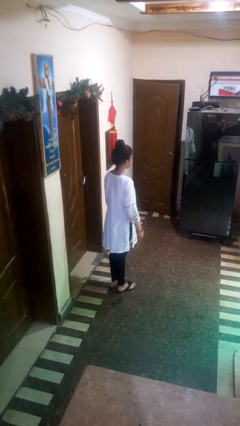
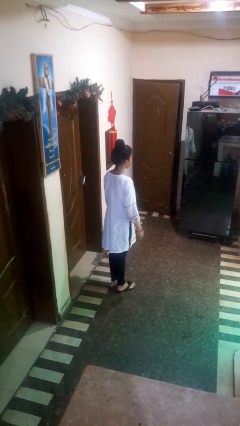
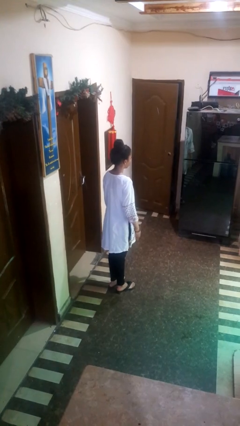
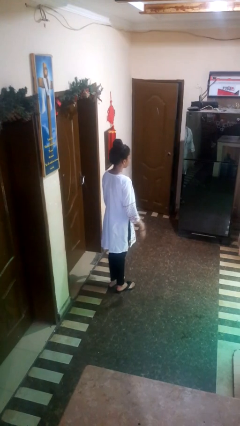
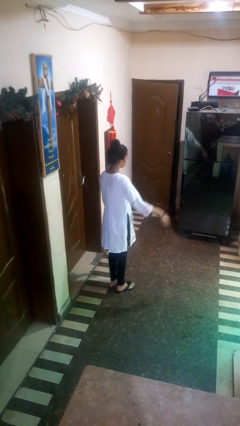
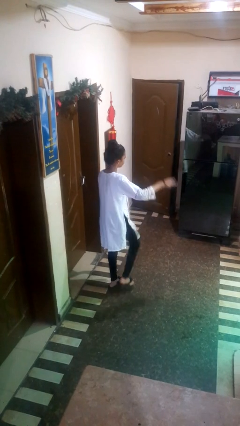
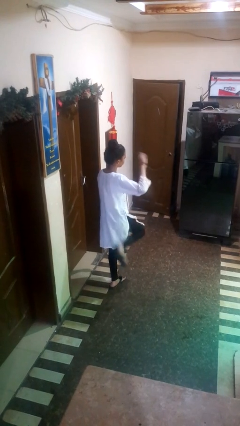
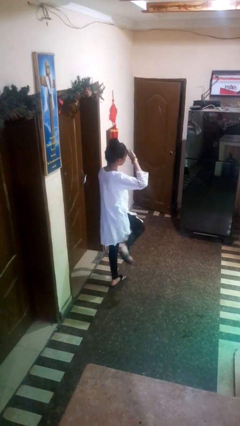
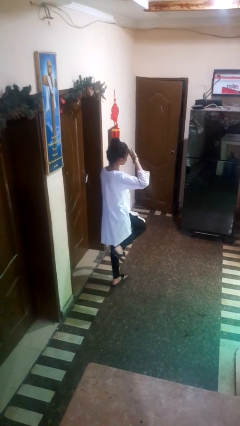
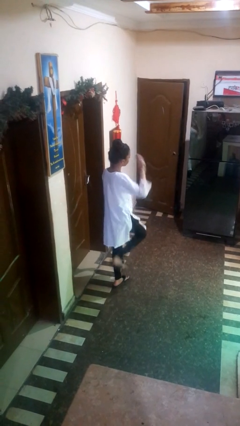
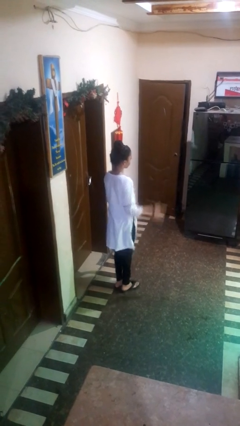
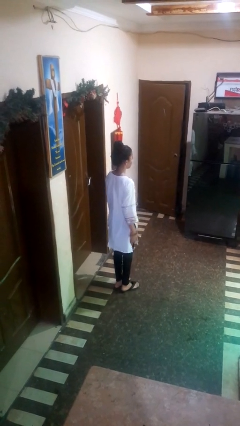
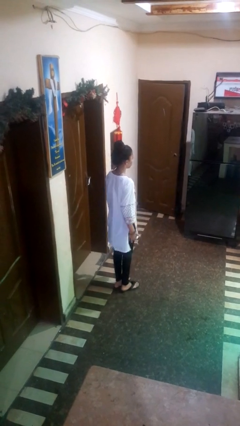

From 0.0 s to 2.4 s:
person salutes

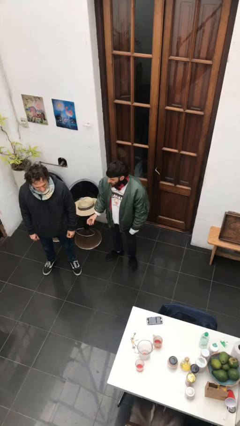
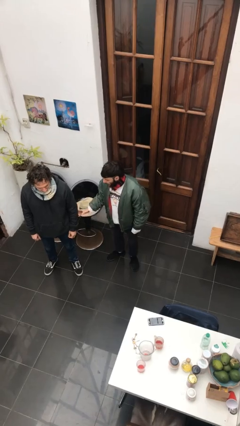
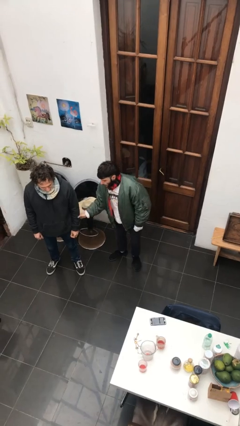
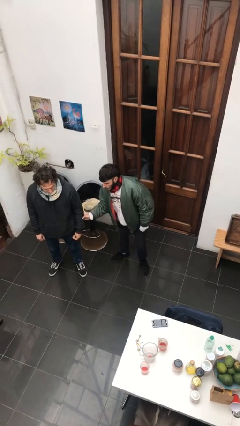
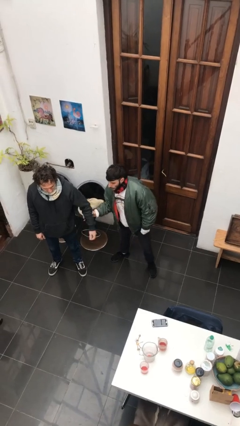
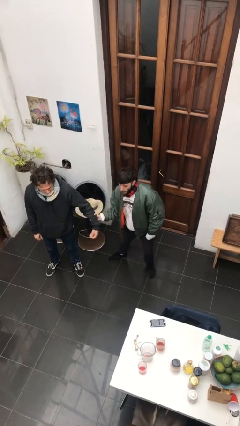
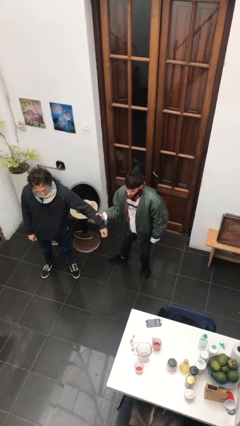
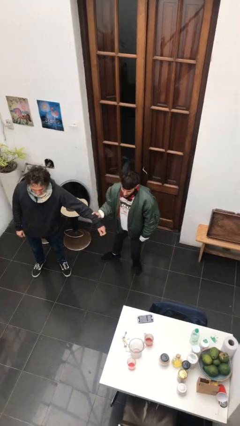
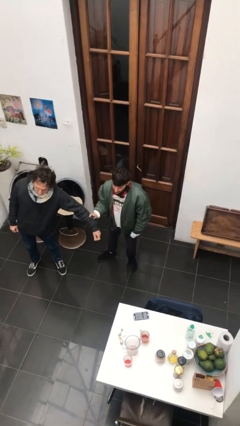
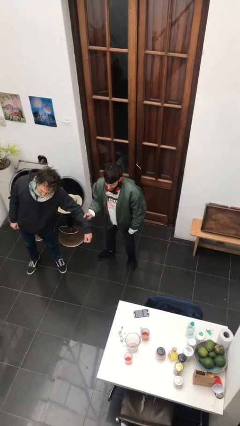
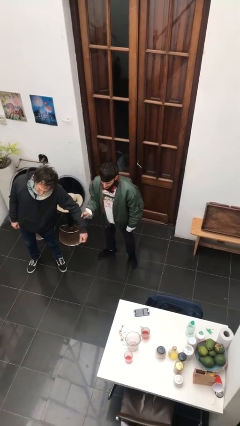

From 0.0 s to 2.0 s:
person grabs person by forearm

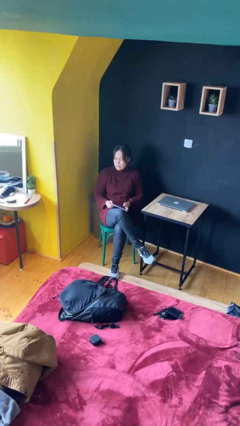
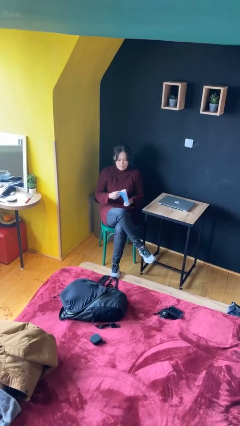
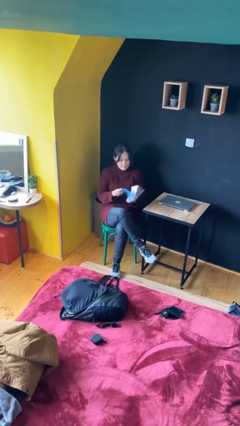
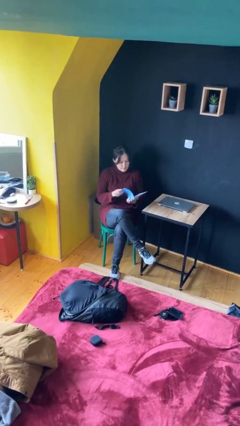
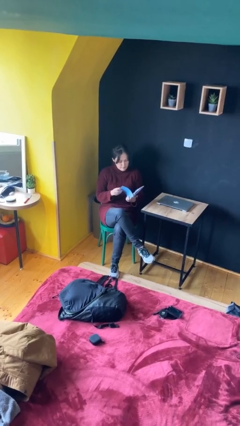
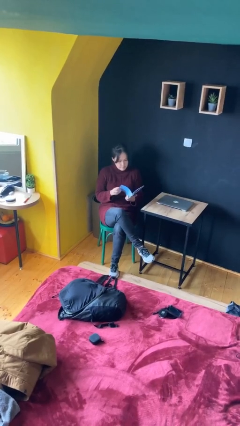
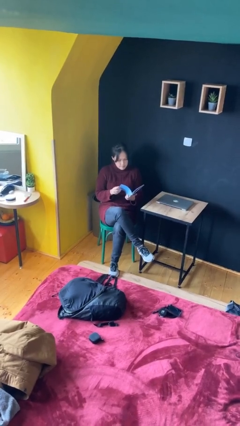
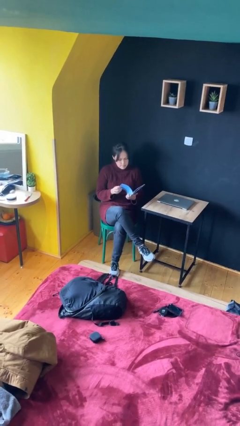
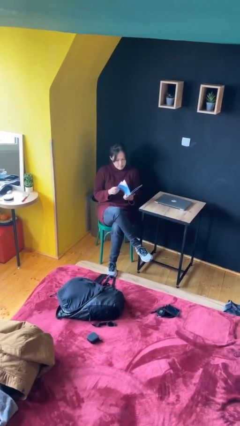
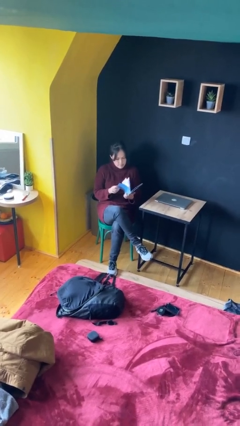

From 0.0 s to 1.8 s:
person reads document

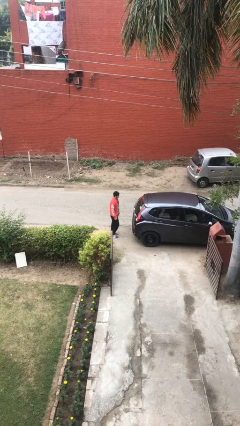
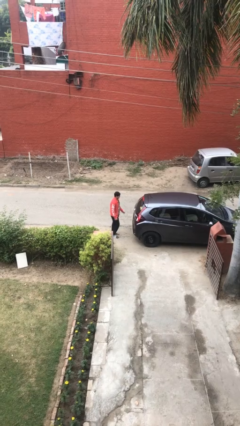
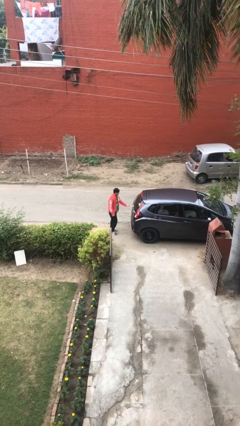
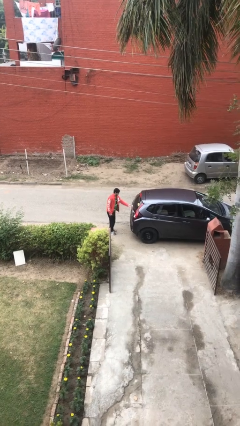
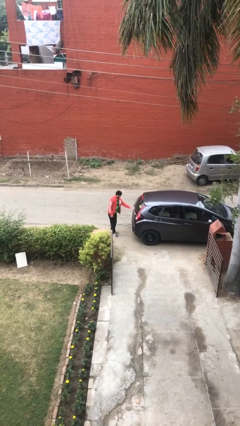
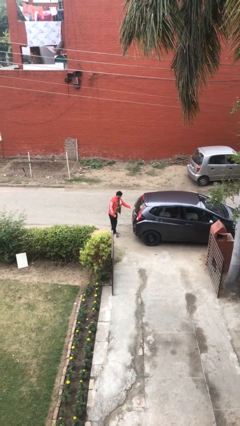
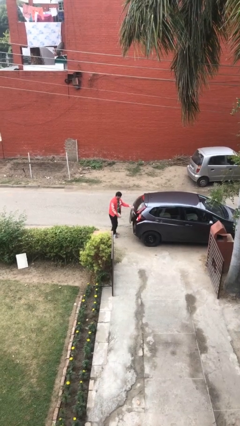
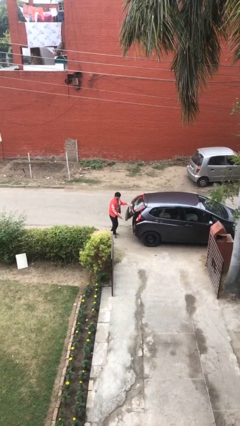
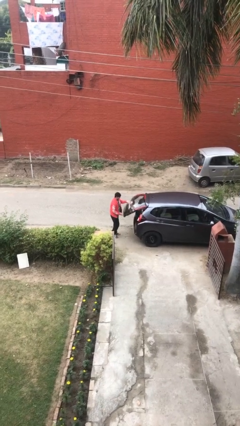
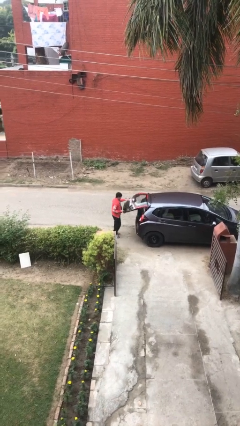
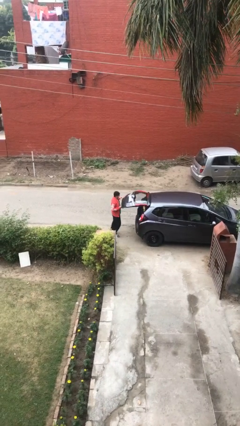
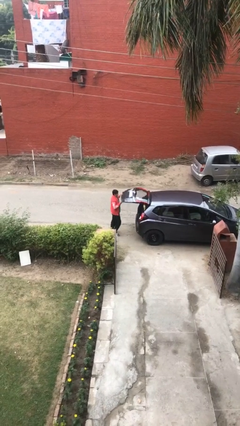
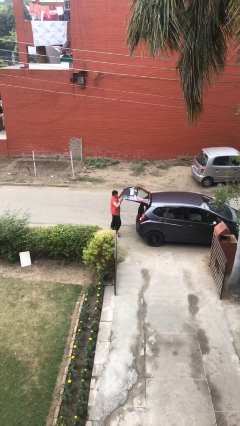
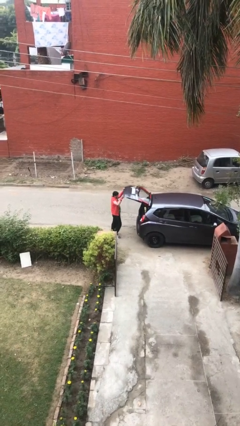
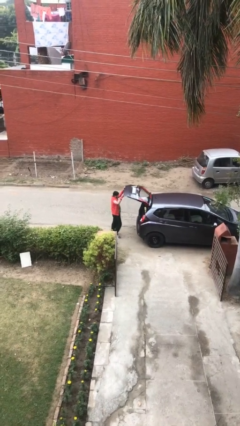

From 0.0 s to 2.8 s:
person opens car trunk

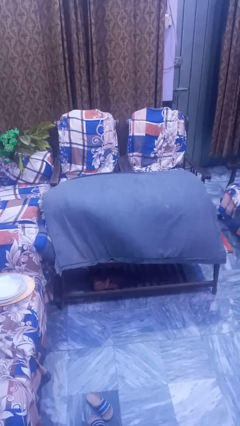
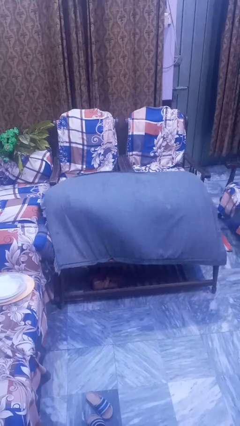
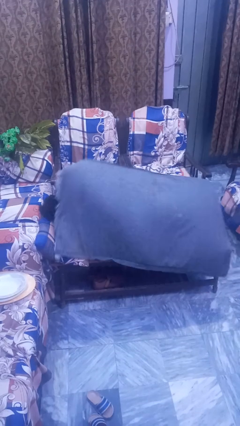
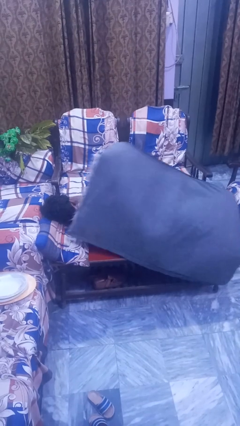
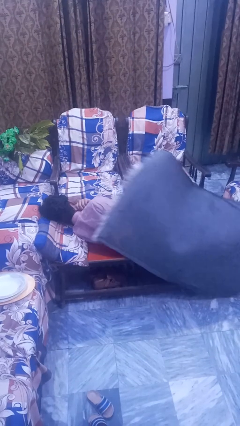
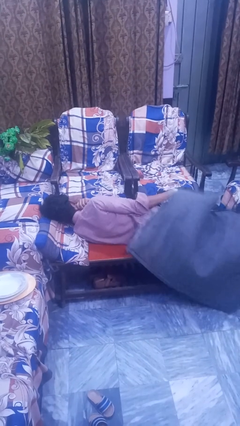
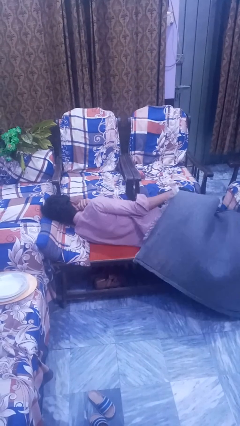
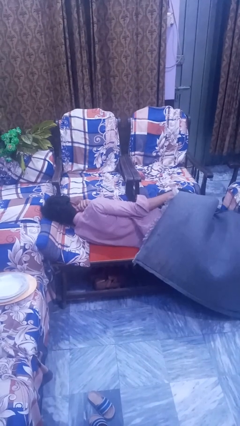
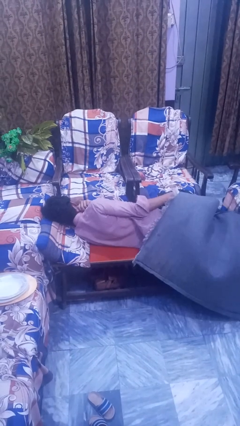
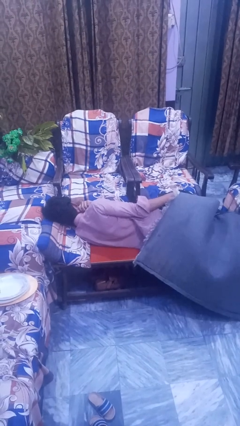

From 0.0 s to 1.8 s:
person uncovers with blanket

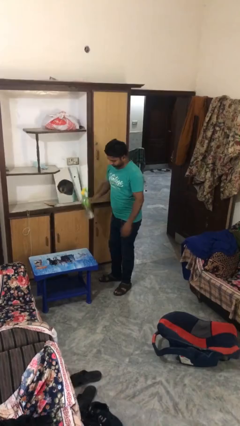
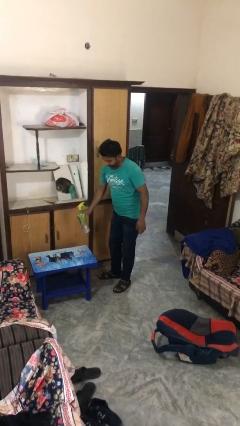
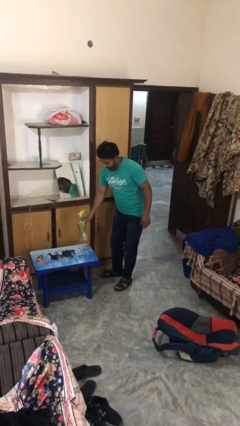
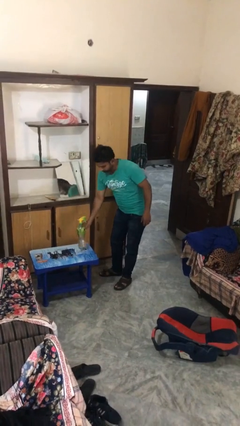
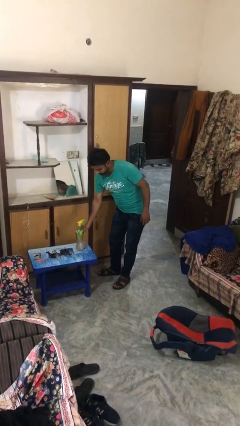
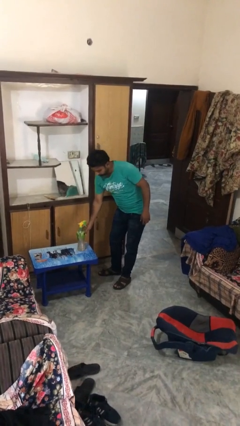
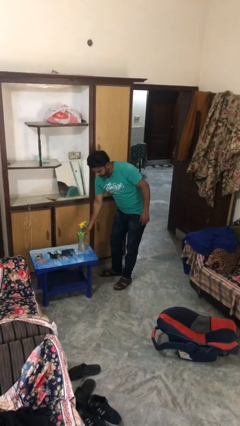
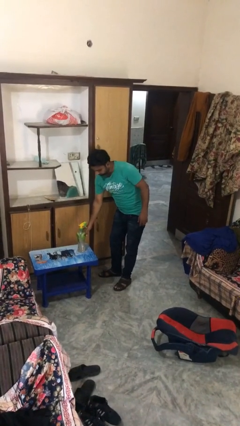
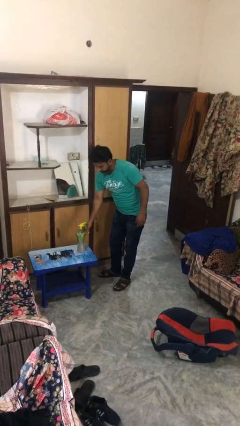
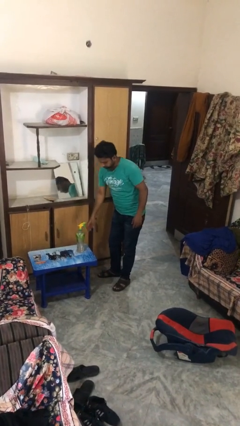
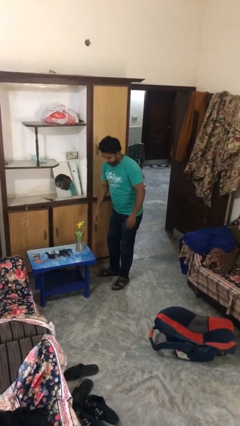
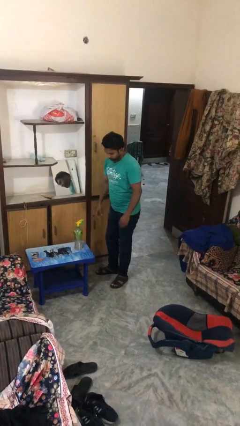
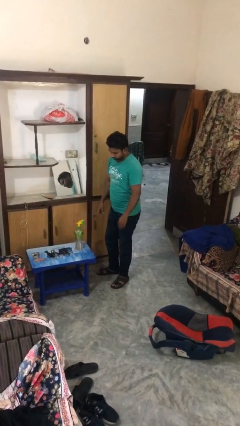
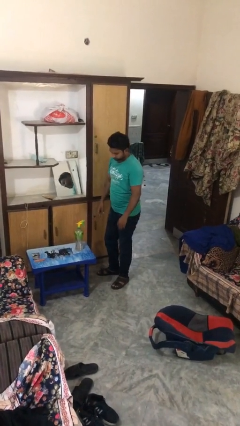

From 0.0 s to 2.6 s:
person puts down object on table

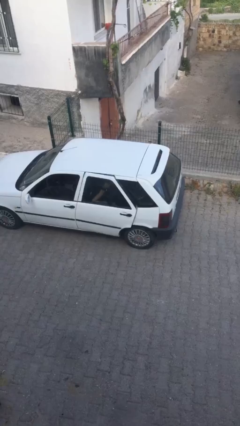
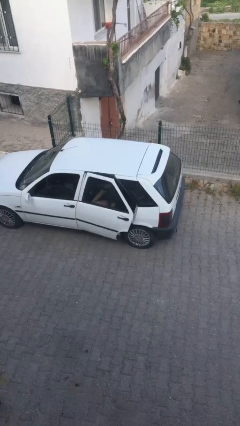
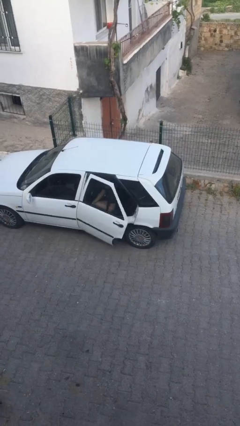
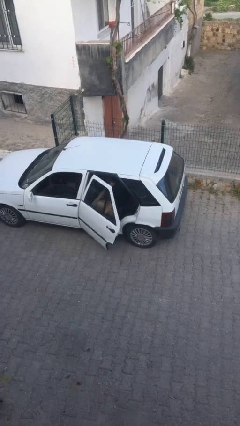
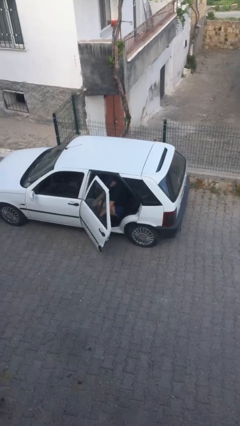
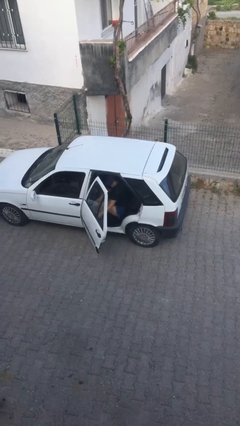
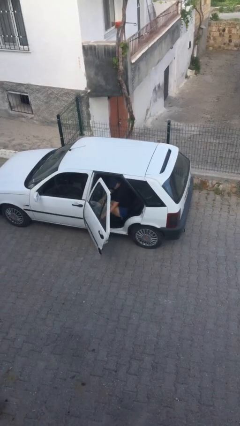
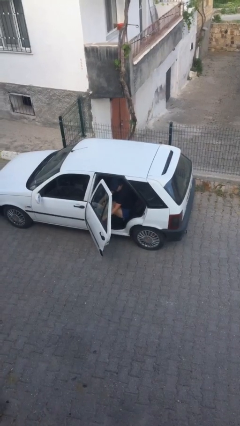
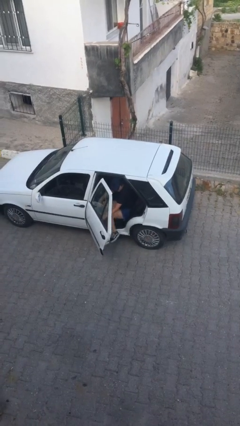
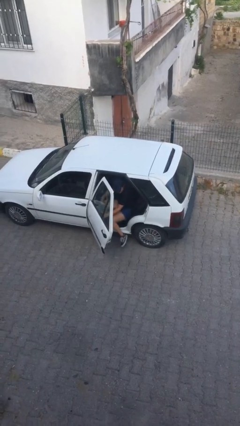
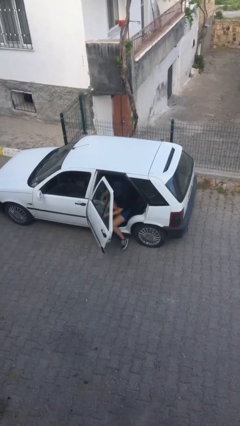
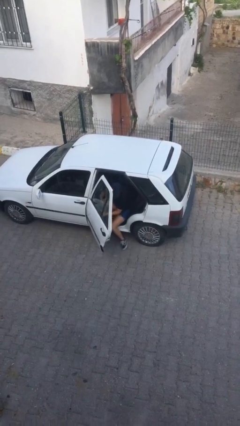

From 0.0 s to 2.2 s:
person opens car door

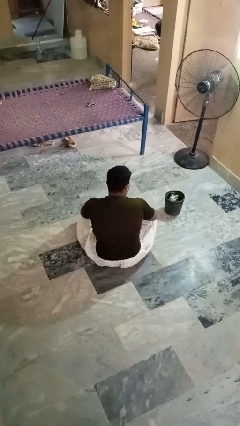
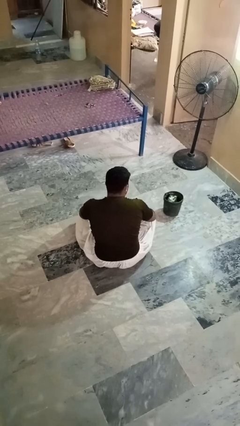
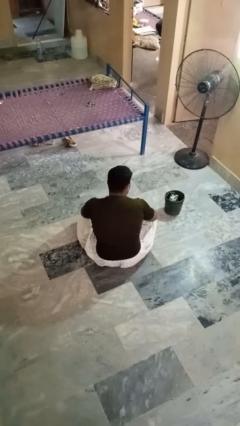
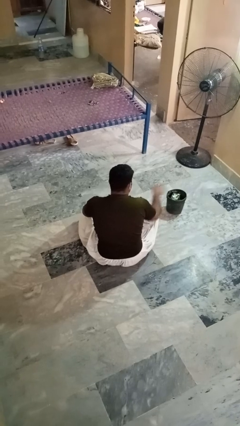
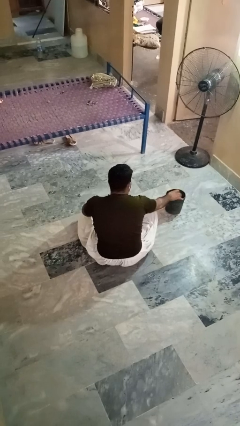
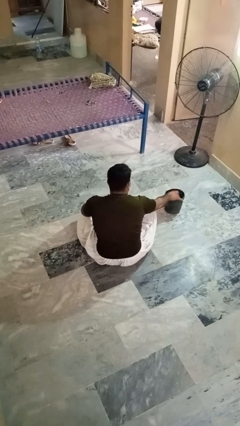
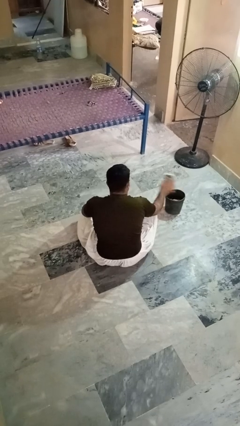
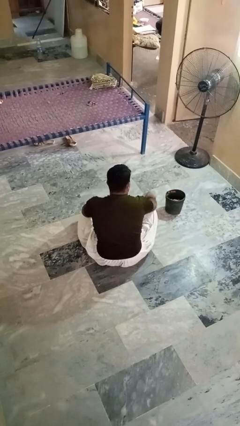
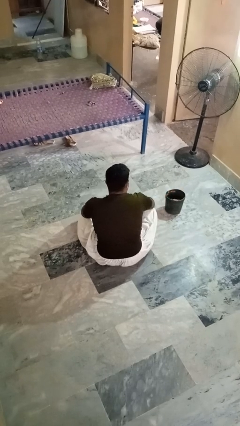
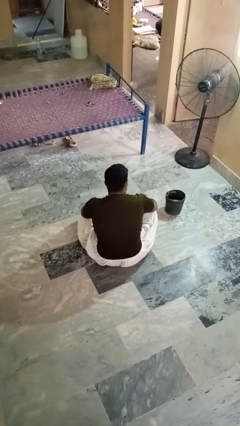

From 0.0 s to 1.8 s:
person takes object from basket
